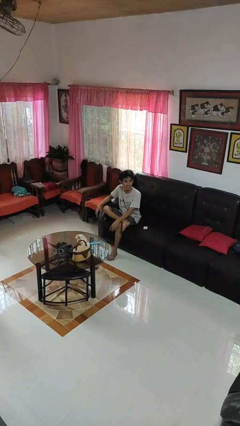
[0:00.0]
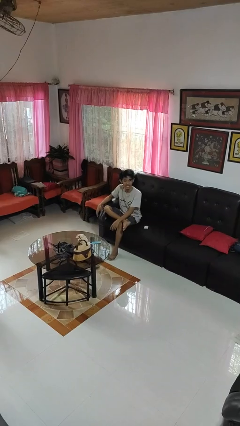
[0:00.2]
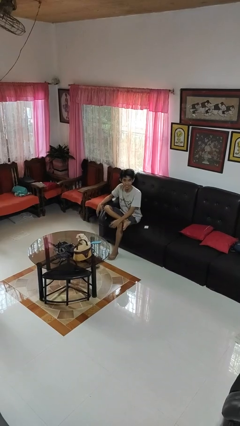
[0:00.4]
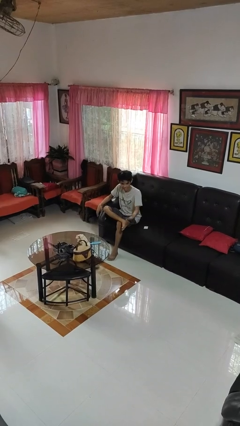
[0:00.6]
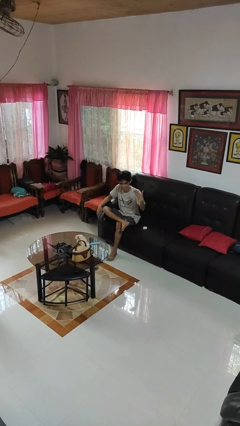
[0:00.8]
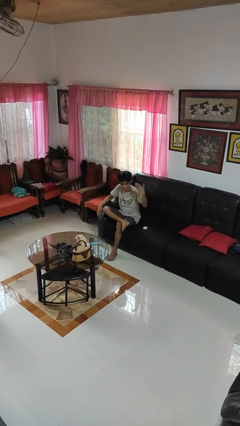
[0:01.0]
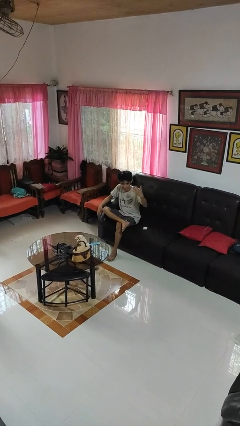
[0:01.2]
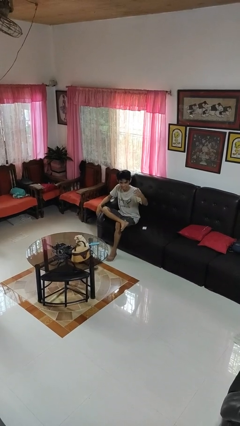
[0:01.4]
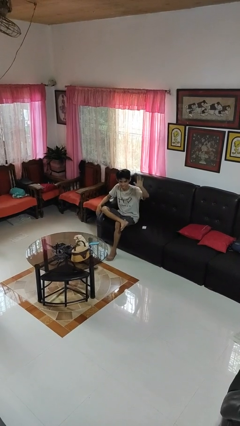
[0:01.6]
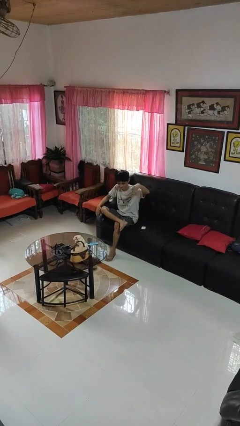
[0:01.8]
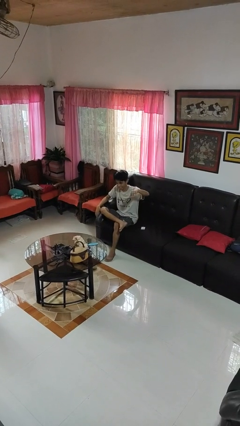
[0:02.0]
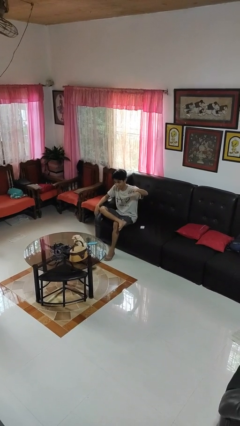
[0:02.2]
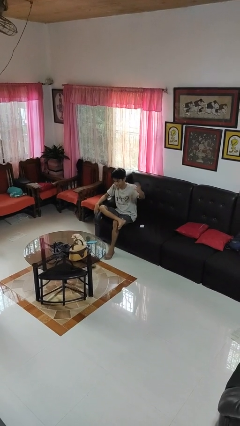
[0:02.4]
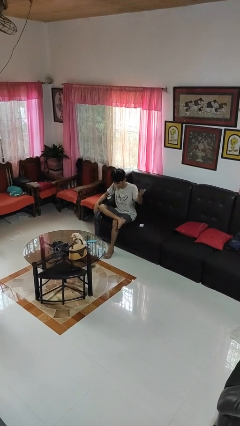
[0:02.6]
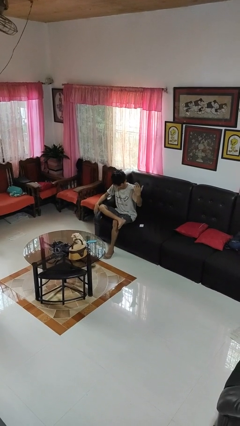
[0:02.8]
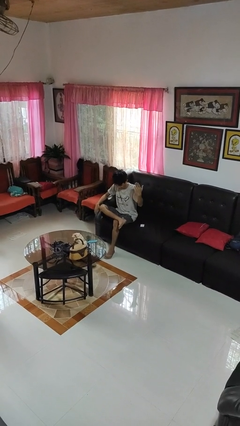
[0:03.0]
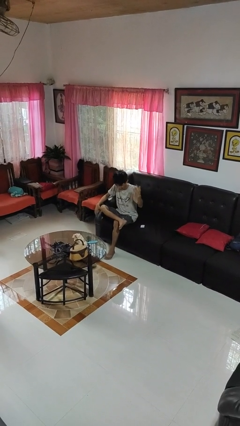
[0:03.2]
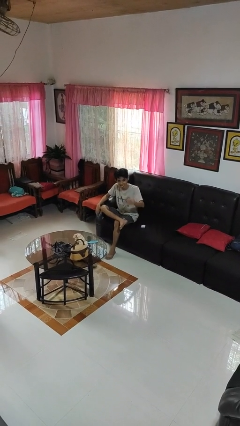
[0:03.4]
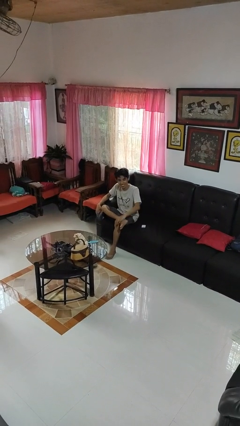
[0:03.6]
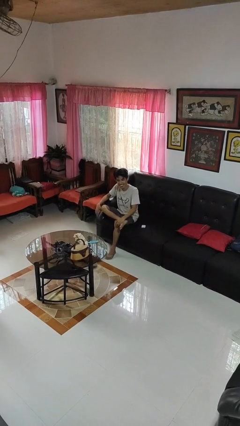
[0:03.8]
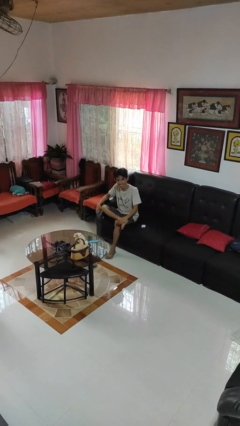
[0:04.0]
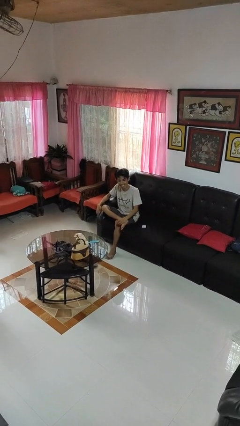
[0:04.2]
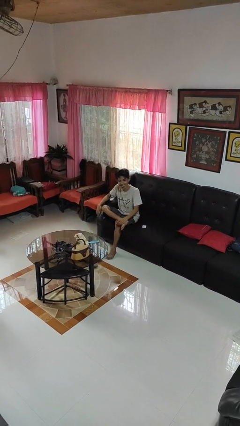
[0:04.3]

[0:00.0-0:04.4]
person gestures come here

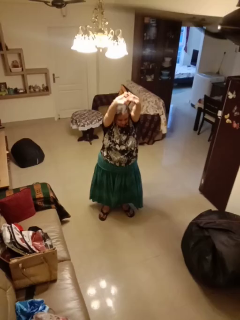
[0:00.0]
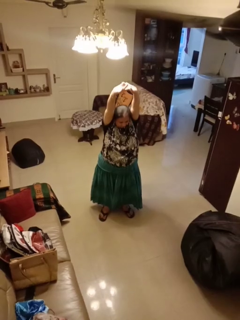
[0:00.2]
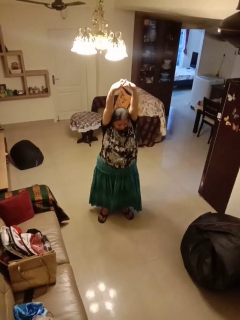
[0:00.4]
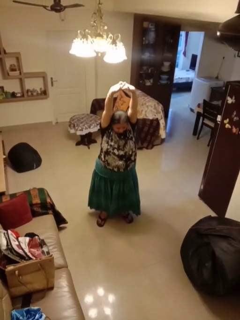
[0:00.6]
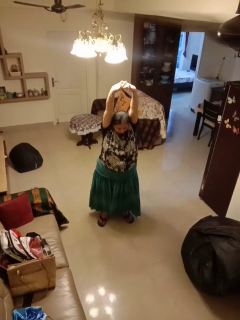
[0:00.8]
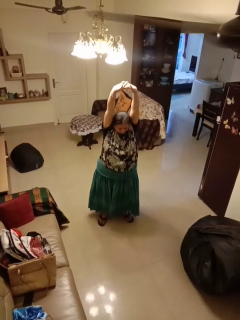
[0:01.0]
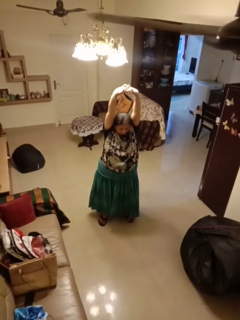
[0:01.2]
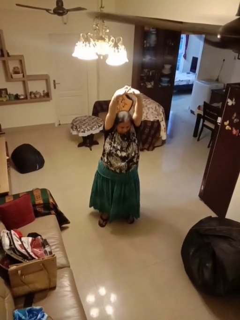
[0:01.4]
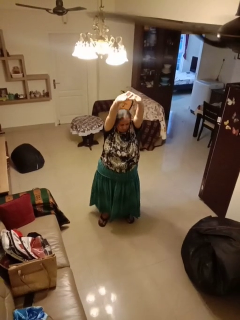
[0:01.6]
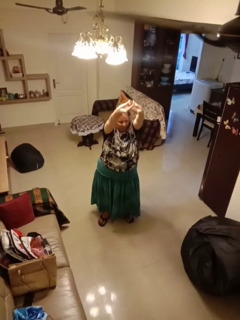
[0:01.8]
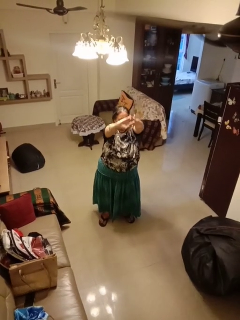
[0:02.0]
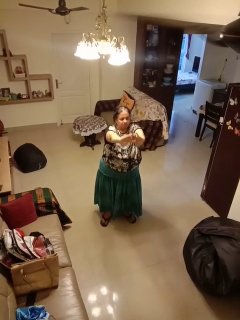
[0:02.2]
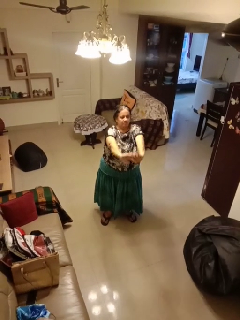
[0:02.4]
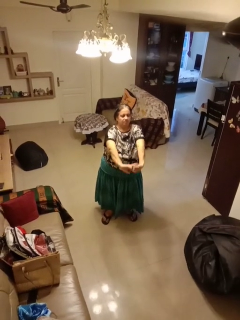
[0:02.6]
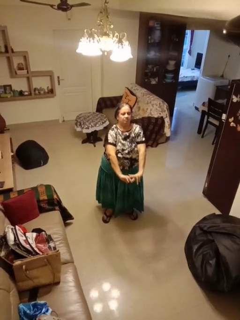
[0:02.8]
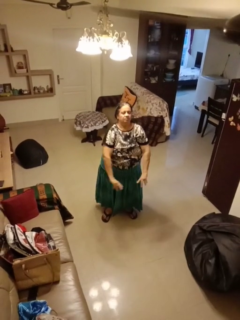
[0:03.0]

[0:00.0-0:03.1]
person stretches arms over head

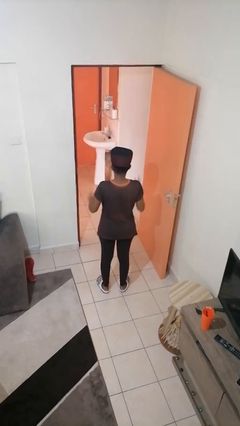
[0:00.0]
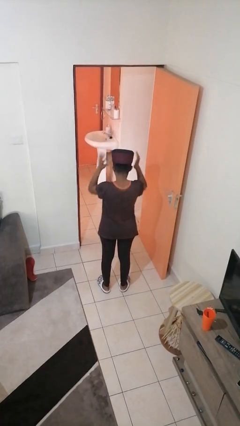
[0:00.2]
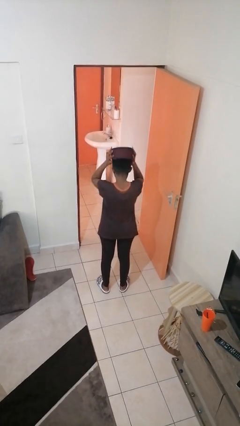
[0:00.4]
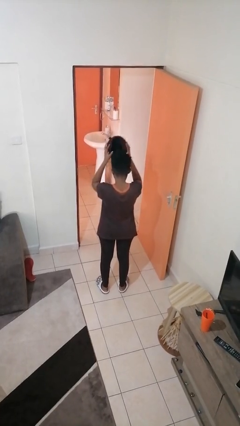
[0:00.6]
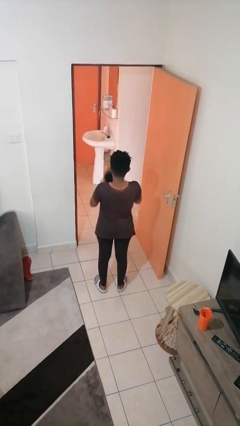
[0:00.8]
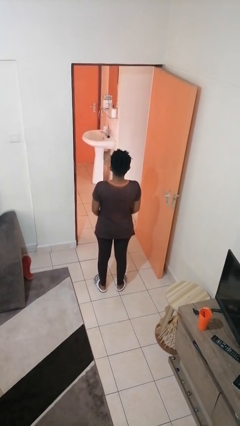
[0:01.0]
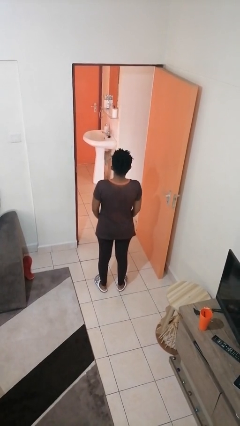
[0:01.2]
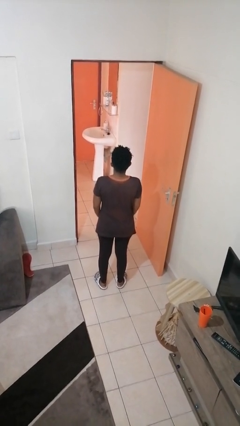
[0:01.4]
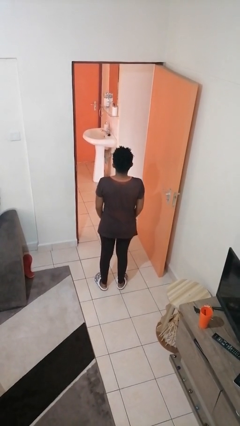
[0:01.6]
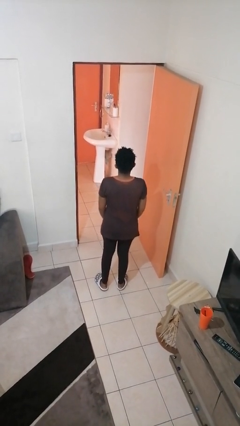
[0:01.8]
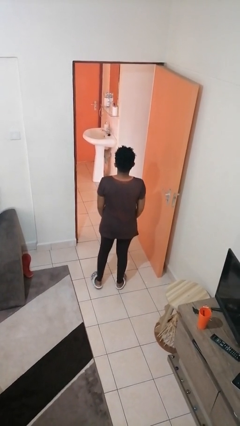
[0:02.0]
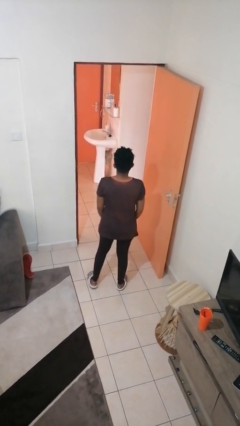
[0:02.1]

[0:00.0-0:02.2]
person takes off hat

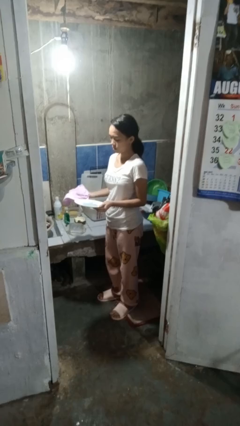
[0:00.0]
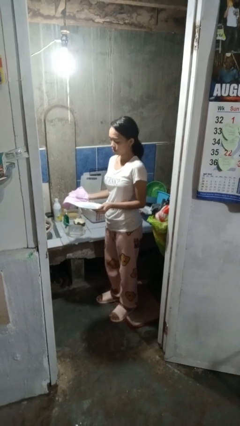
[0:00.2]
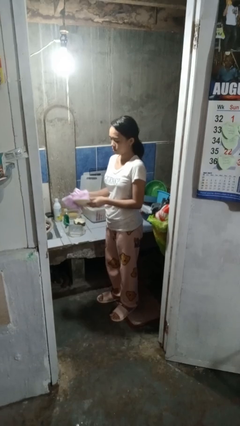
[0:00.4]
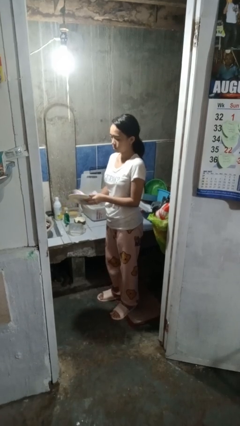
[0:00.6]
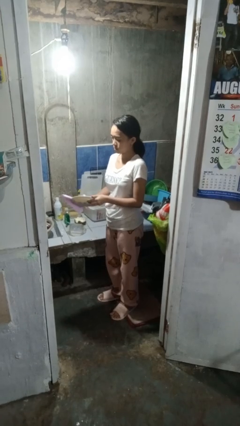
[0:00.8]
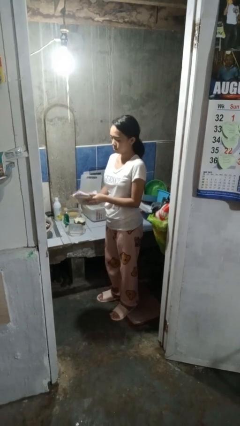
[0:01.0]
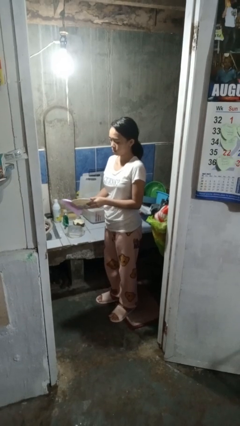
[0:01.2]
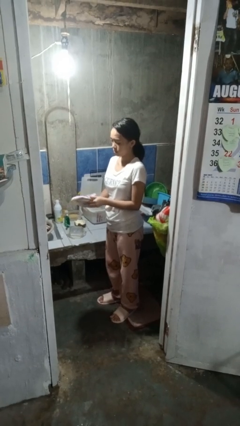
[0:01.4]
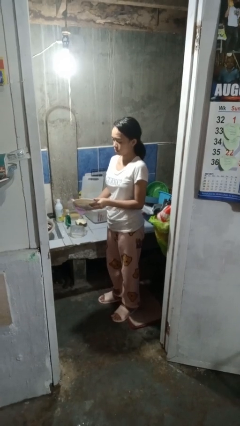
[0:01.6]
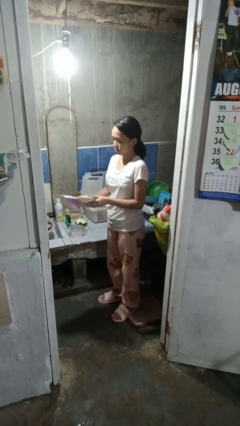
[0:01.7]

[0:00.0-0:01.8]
person dries dish

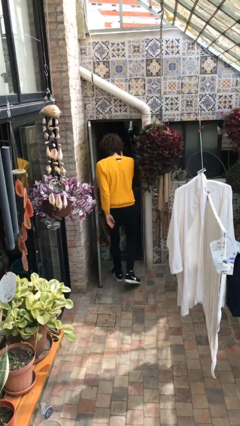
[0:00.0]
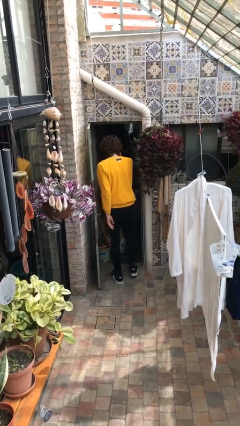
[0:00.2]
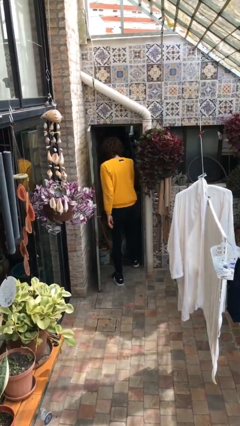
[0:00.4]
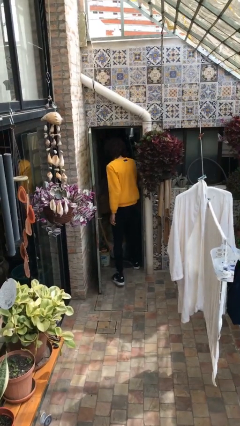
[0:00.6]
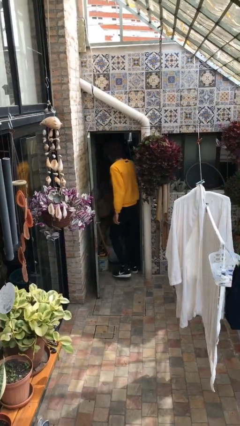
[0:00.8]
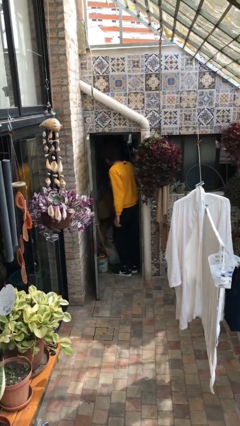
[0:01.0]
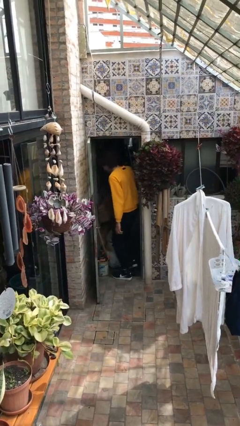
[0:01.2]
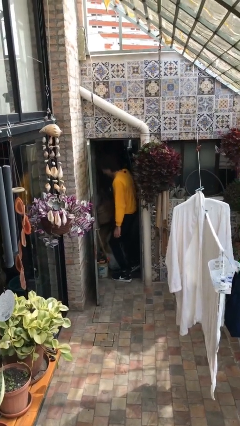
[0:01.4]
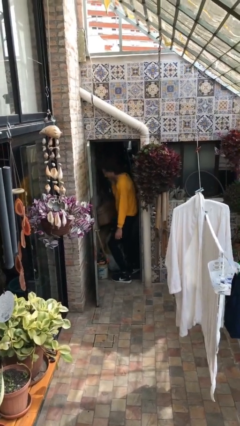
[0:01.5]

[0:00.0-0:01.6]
person exits scene through structure

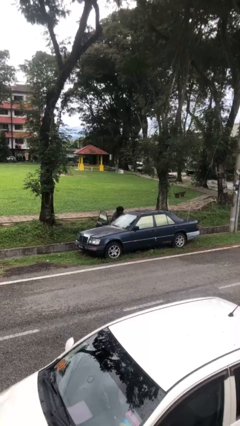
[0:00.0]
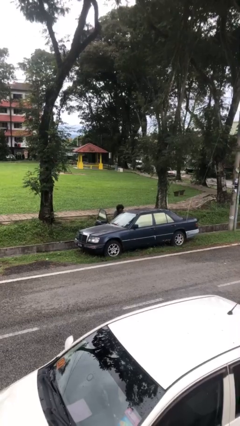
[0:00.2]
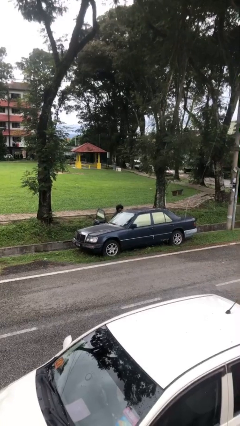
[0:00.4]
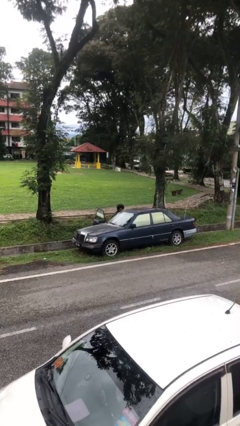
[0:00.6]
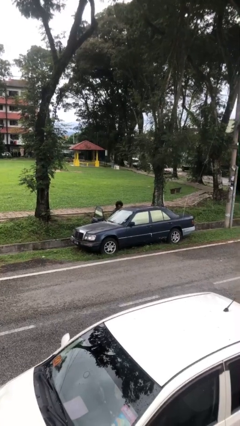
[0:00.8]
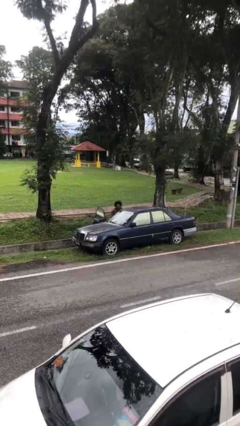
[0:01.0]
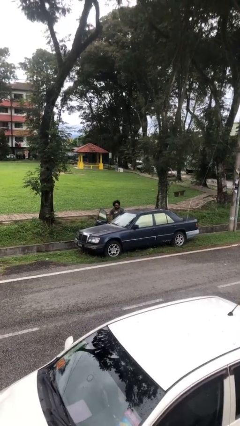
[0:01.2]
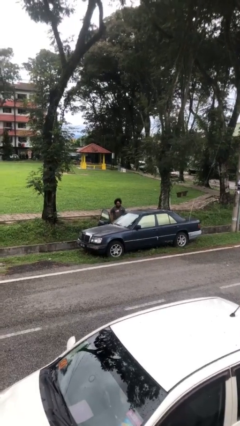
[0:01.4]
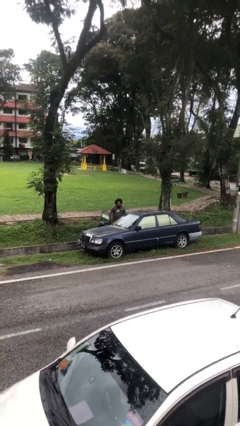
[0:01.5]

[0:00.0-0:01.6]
person loads car

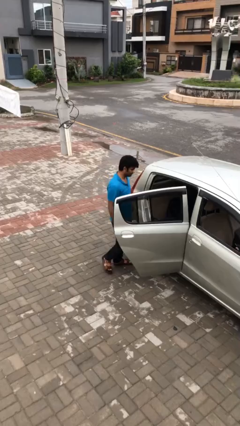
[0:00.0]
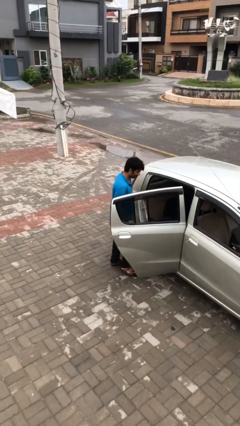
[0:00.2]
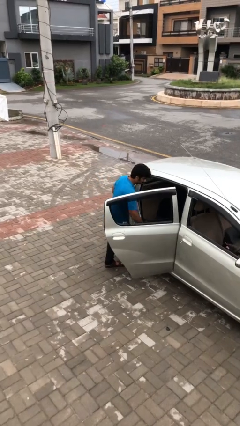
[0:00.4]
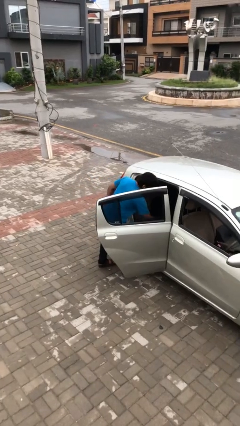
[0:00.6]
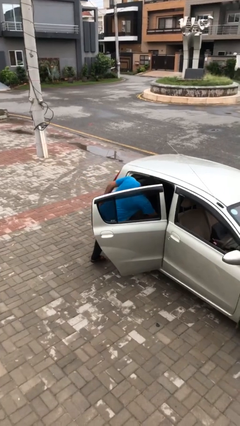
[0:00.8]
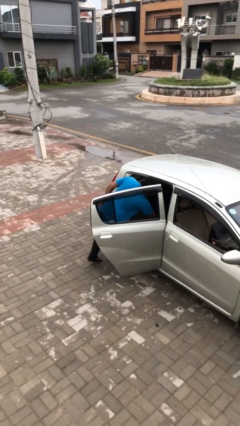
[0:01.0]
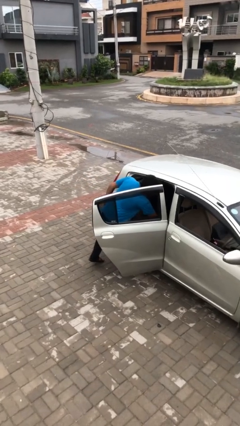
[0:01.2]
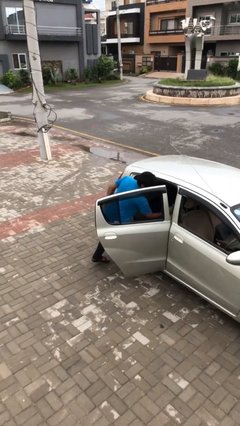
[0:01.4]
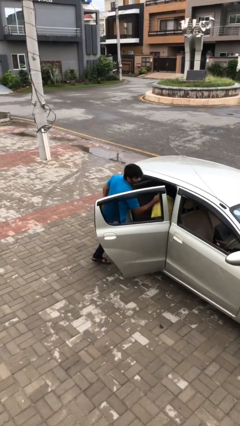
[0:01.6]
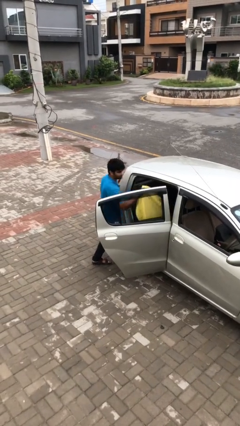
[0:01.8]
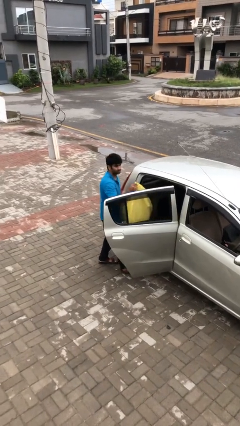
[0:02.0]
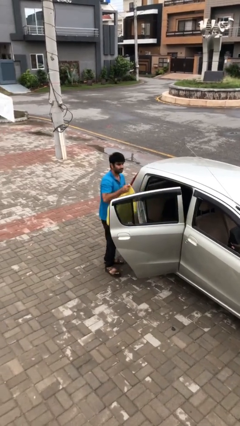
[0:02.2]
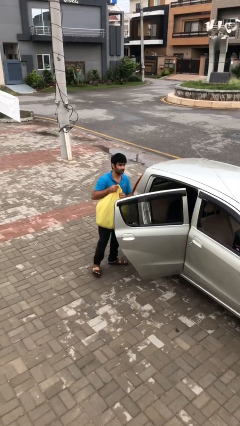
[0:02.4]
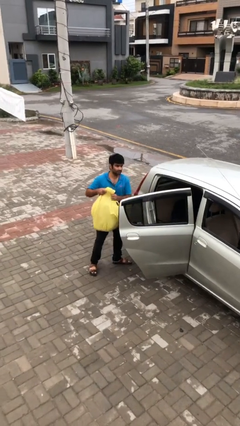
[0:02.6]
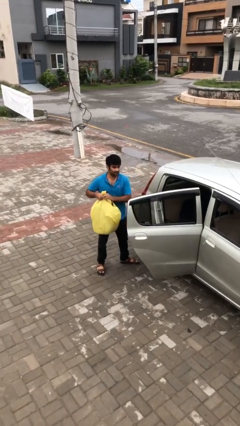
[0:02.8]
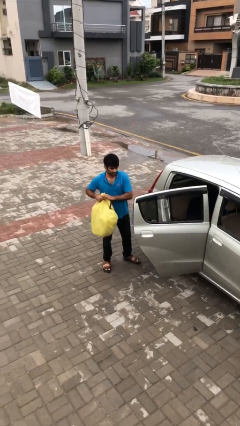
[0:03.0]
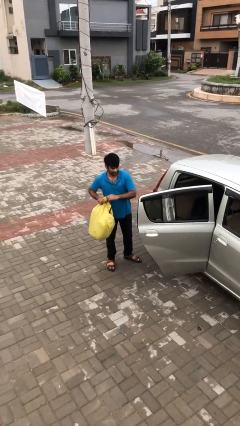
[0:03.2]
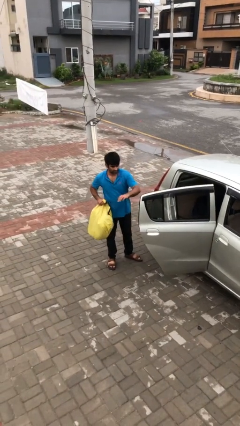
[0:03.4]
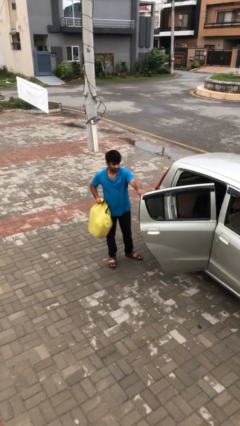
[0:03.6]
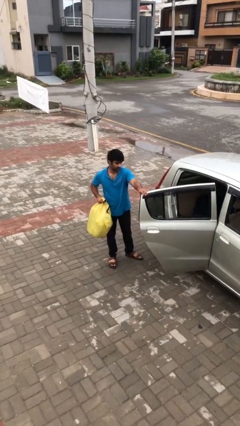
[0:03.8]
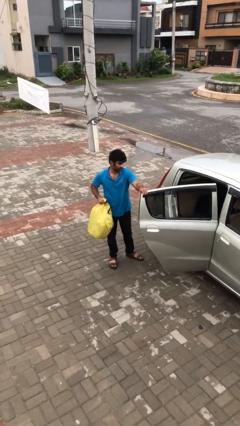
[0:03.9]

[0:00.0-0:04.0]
person unloads car
